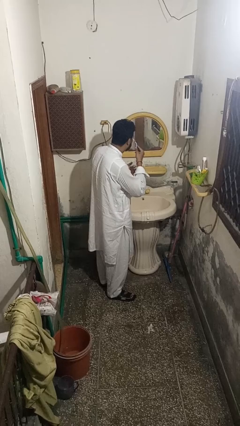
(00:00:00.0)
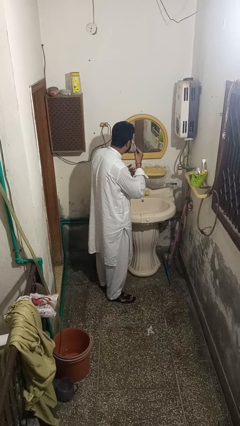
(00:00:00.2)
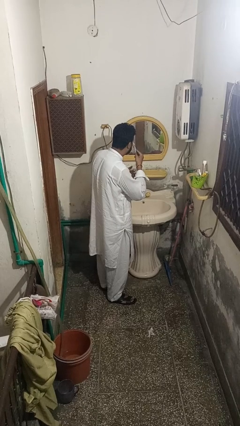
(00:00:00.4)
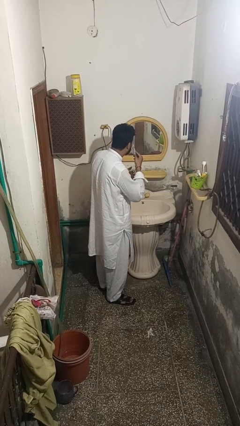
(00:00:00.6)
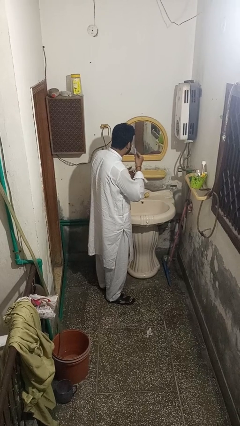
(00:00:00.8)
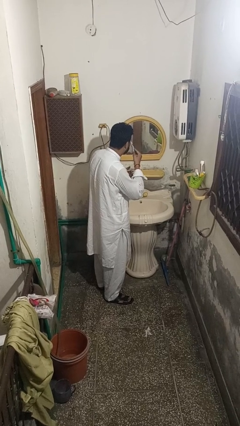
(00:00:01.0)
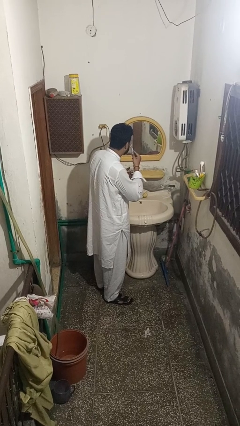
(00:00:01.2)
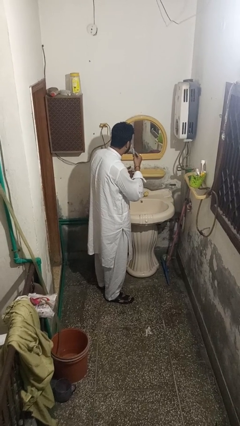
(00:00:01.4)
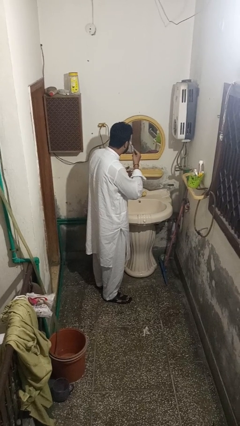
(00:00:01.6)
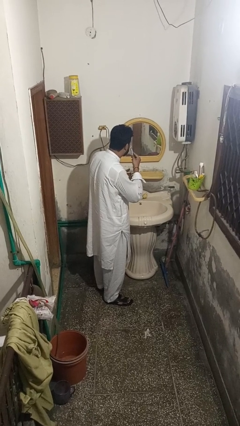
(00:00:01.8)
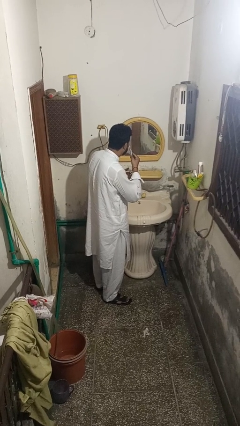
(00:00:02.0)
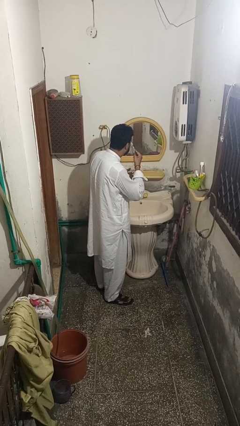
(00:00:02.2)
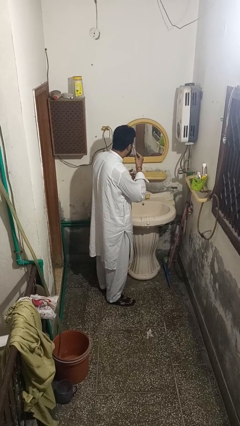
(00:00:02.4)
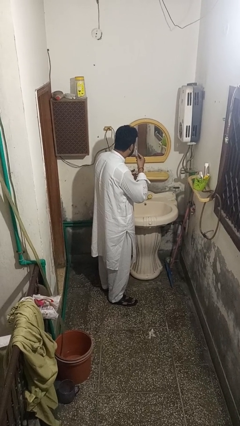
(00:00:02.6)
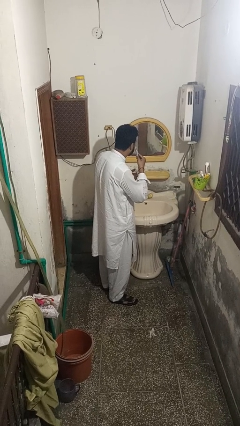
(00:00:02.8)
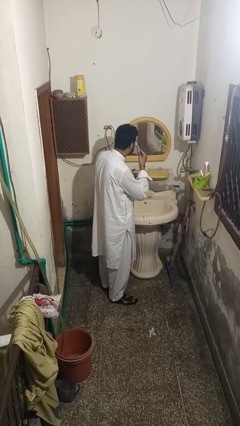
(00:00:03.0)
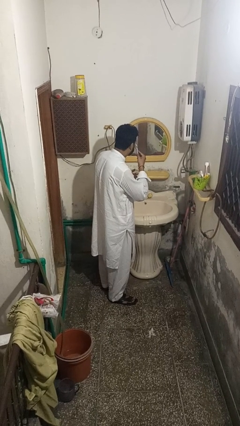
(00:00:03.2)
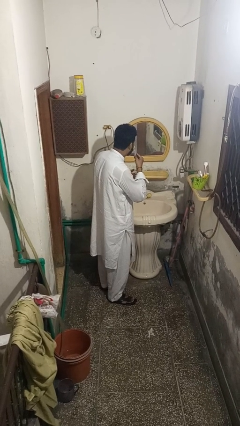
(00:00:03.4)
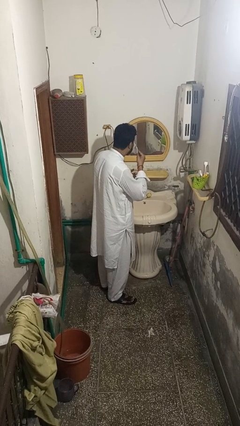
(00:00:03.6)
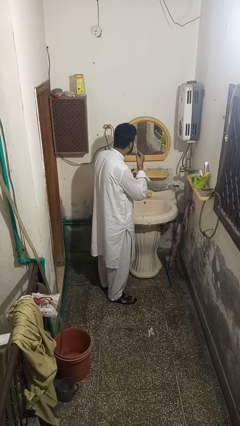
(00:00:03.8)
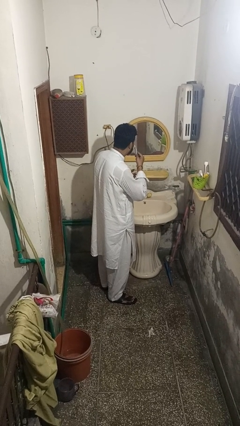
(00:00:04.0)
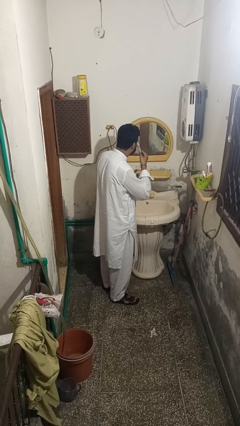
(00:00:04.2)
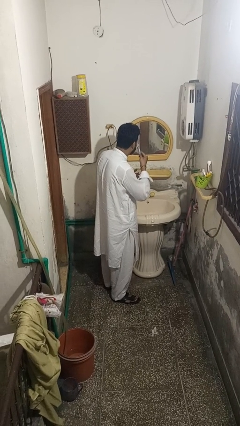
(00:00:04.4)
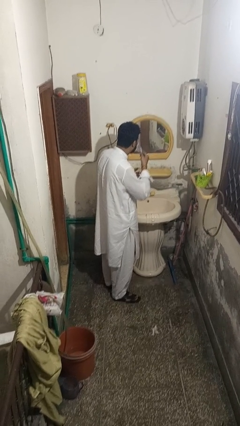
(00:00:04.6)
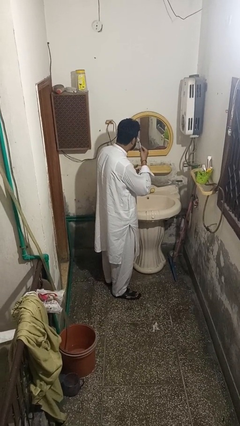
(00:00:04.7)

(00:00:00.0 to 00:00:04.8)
person shaves face

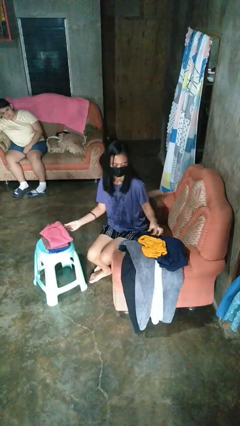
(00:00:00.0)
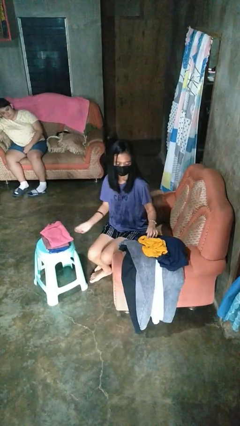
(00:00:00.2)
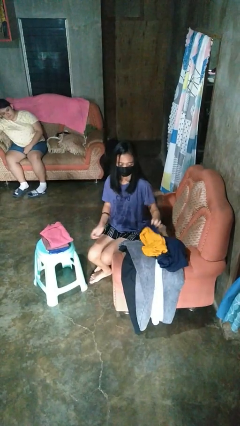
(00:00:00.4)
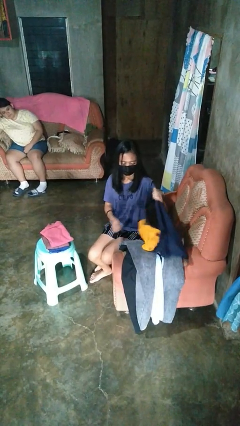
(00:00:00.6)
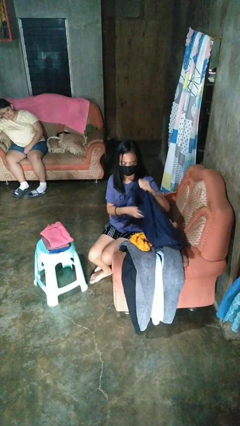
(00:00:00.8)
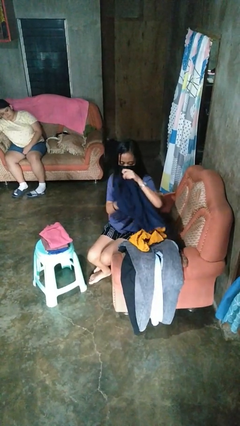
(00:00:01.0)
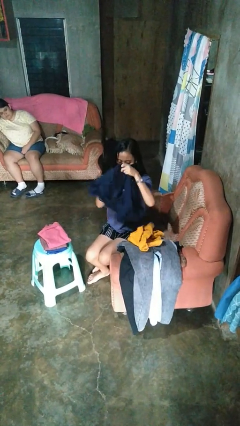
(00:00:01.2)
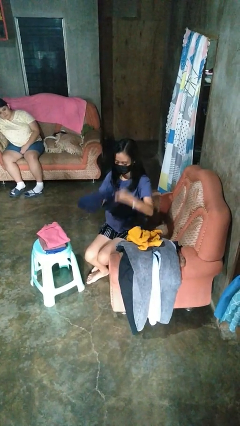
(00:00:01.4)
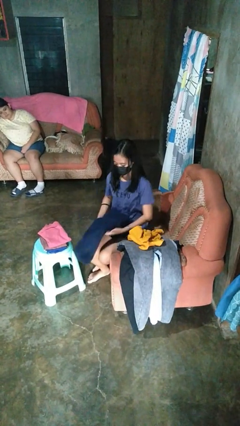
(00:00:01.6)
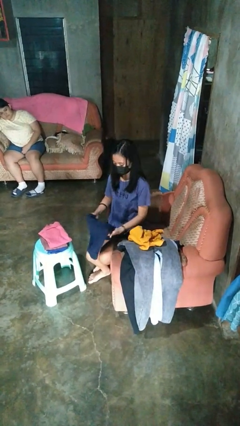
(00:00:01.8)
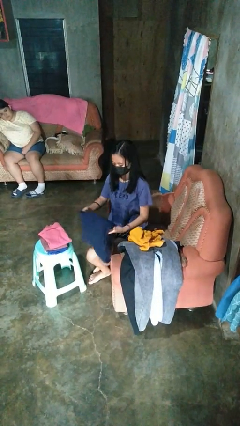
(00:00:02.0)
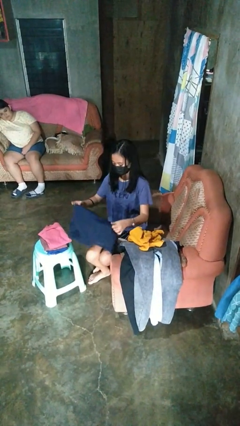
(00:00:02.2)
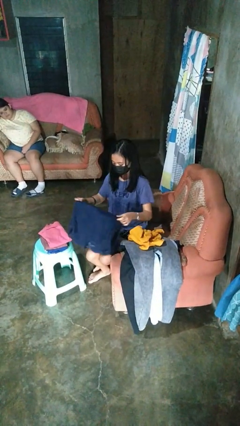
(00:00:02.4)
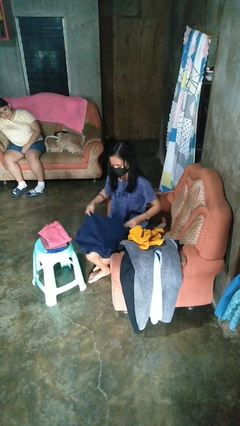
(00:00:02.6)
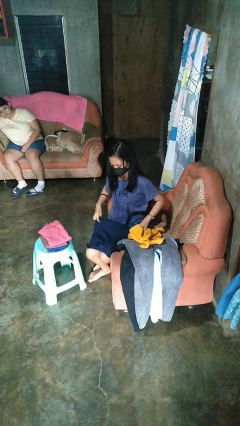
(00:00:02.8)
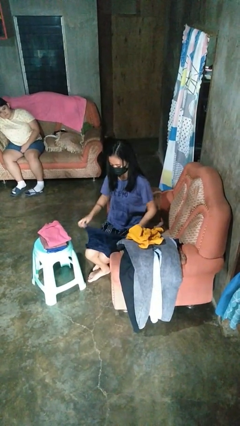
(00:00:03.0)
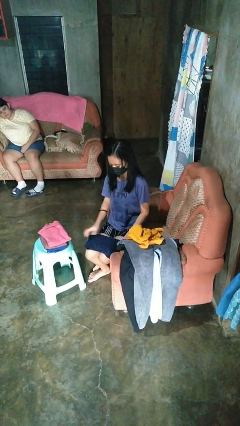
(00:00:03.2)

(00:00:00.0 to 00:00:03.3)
person folds shirt

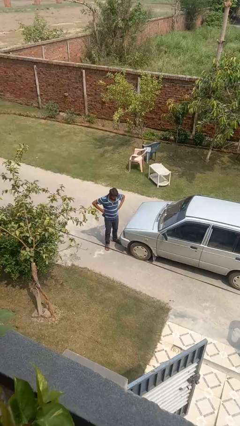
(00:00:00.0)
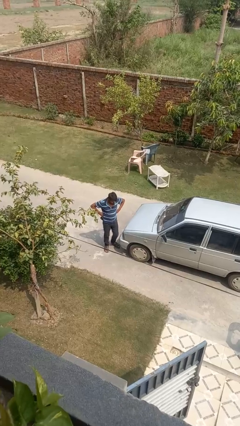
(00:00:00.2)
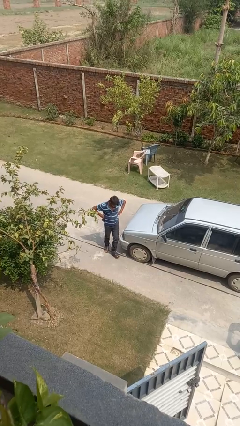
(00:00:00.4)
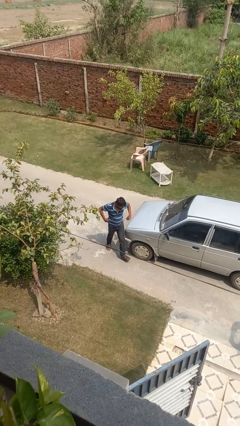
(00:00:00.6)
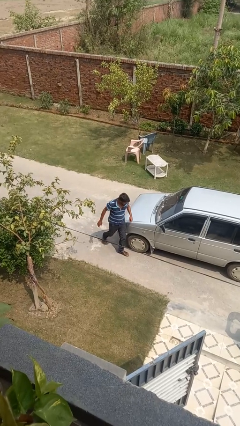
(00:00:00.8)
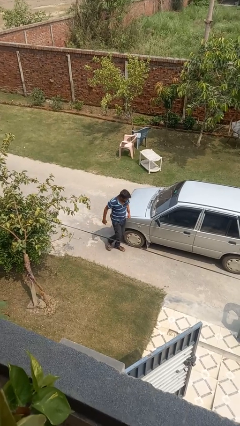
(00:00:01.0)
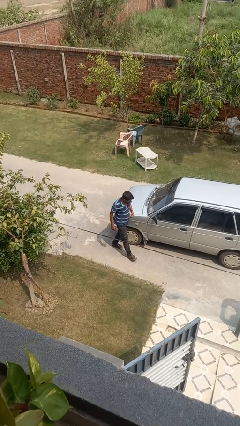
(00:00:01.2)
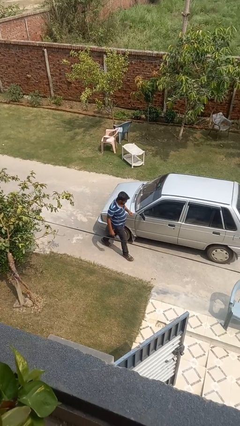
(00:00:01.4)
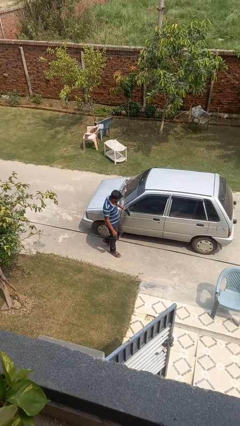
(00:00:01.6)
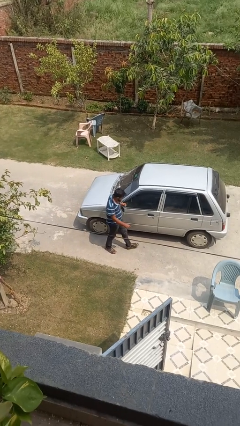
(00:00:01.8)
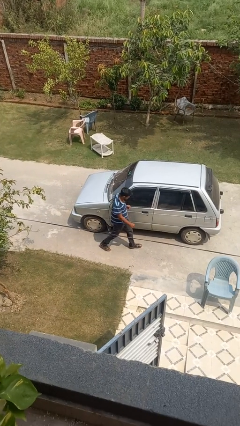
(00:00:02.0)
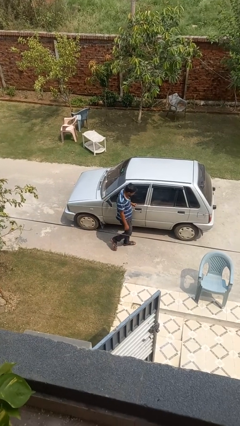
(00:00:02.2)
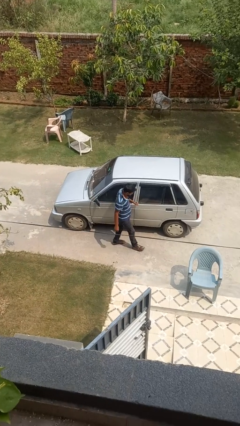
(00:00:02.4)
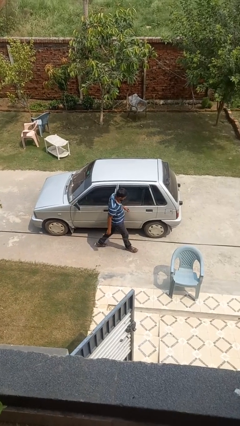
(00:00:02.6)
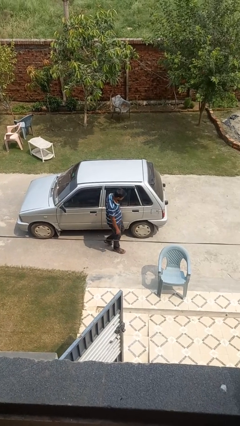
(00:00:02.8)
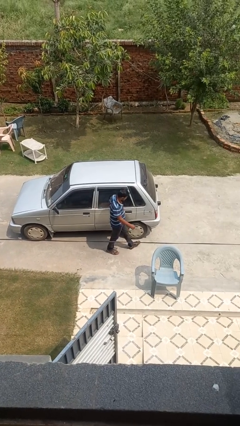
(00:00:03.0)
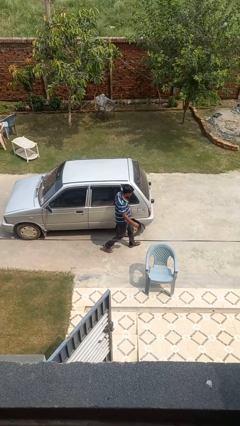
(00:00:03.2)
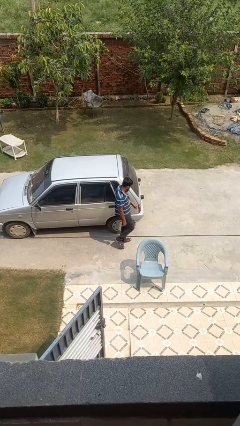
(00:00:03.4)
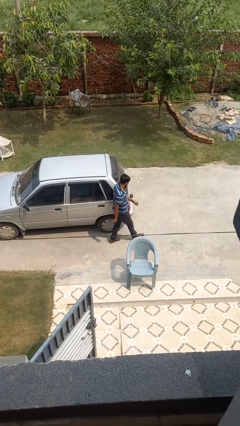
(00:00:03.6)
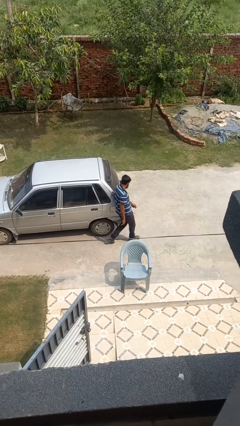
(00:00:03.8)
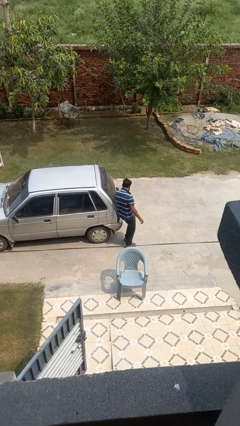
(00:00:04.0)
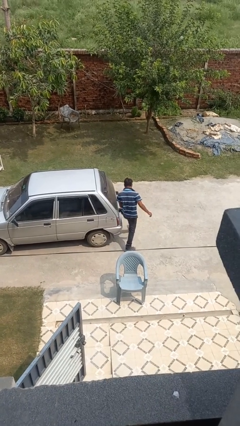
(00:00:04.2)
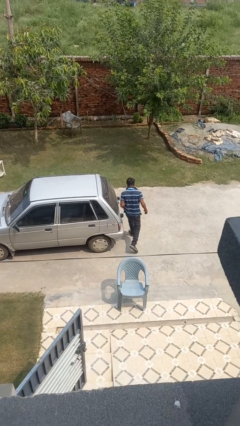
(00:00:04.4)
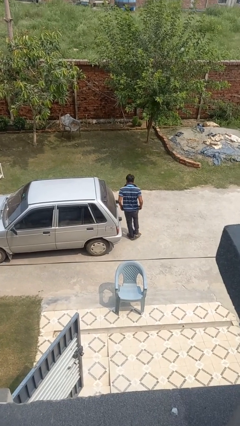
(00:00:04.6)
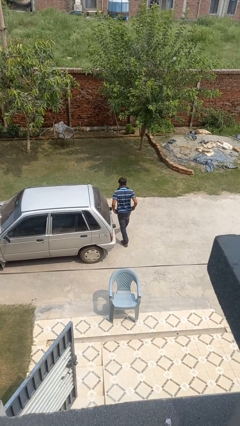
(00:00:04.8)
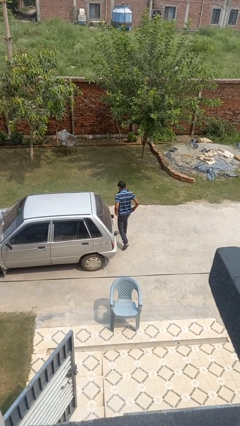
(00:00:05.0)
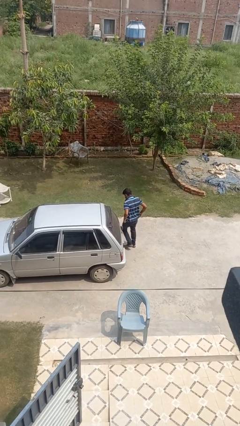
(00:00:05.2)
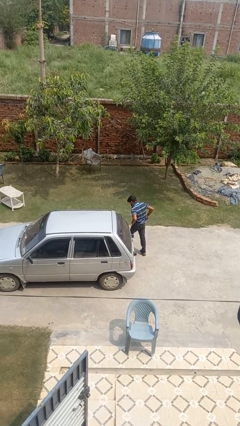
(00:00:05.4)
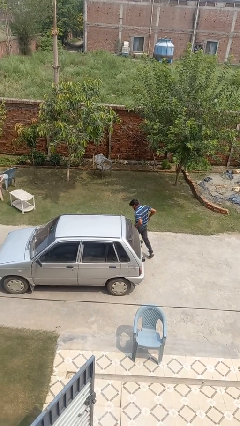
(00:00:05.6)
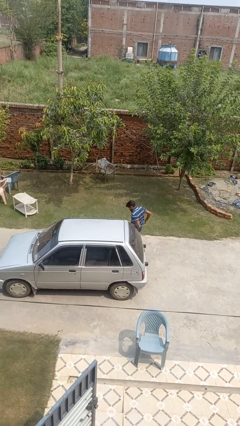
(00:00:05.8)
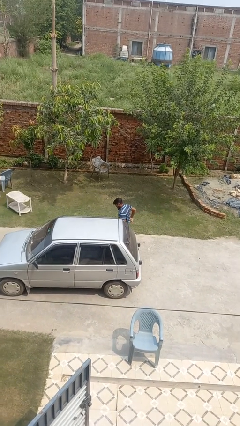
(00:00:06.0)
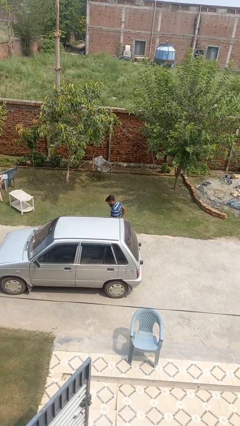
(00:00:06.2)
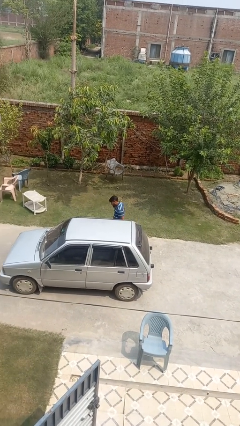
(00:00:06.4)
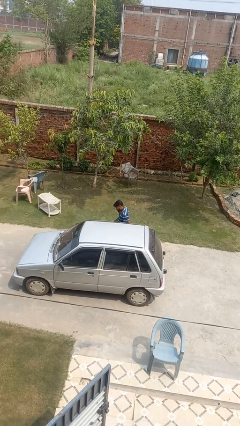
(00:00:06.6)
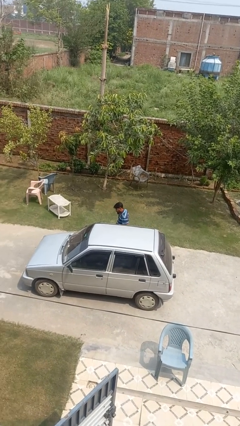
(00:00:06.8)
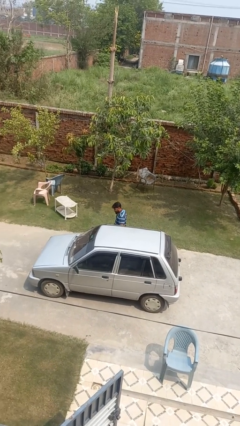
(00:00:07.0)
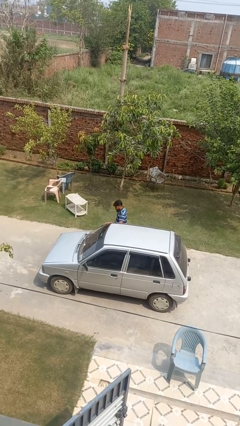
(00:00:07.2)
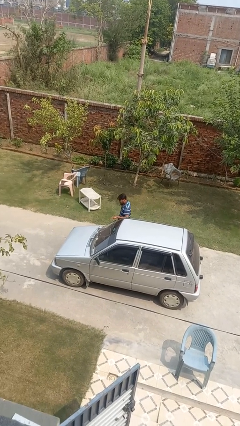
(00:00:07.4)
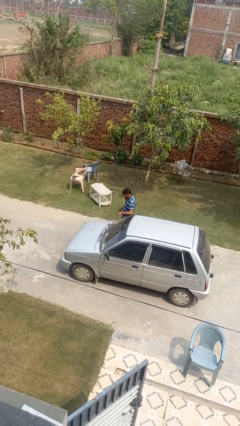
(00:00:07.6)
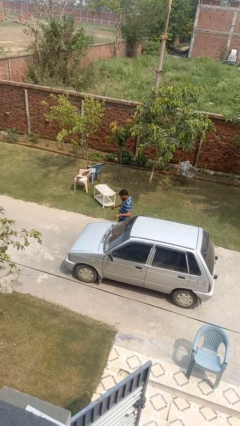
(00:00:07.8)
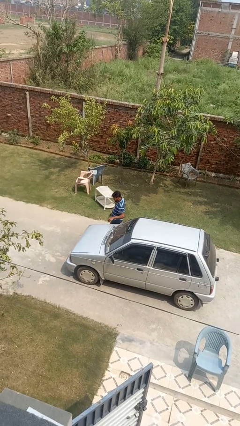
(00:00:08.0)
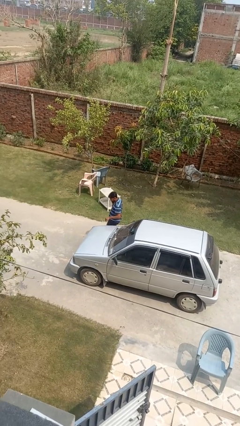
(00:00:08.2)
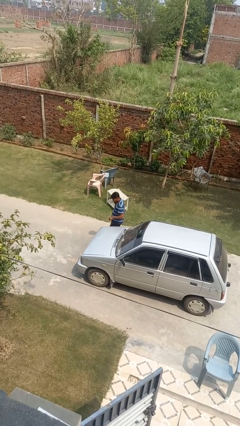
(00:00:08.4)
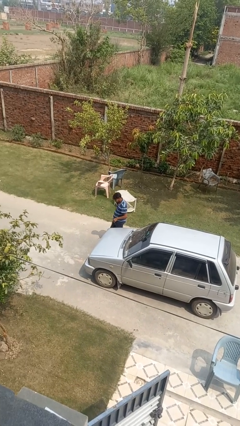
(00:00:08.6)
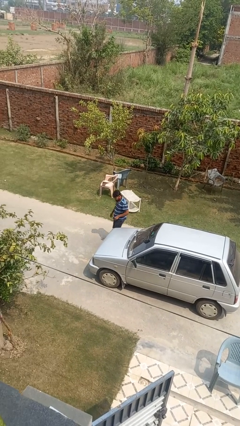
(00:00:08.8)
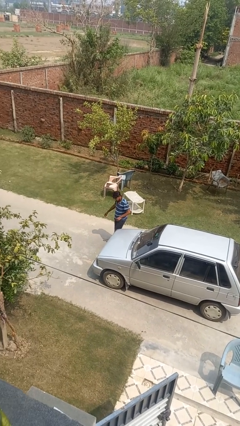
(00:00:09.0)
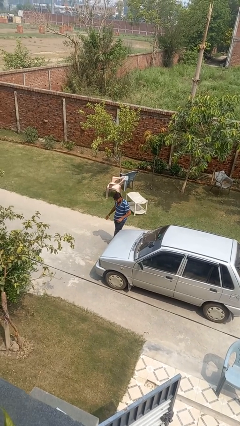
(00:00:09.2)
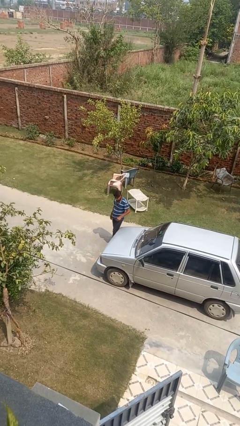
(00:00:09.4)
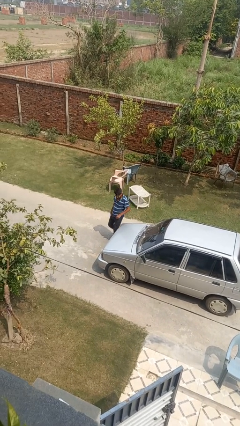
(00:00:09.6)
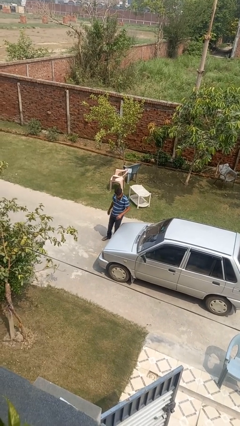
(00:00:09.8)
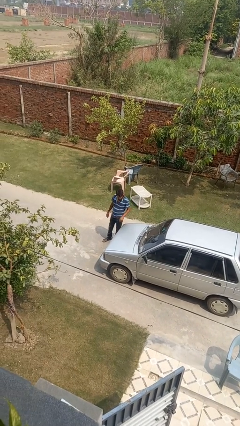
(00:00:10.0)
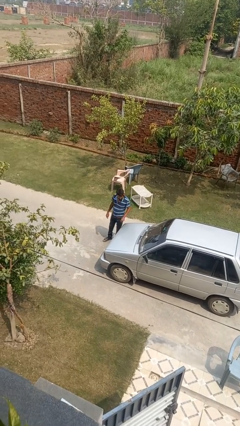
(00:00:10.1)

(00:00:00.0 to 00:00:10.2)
person walks around car
